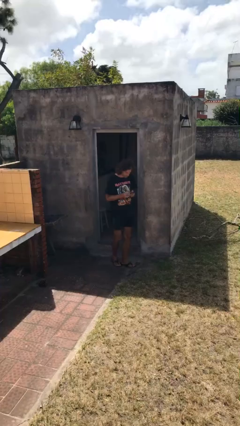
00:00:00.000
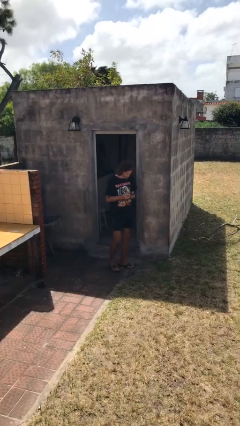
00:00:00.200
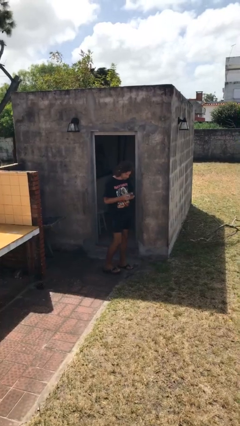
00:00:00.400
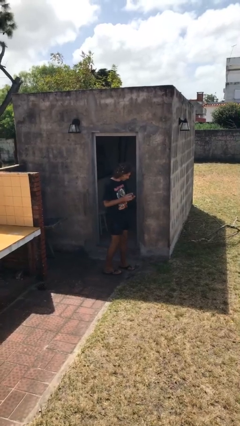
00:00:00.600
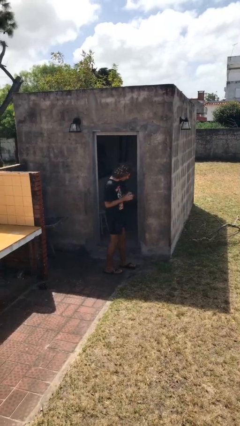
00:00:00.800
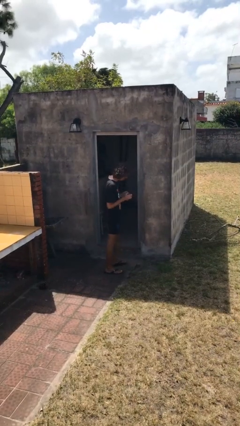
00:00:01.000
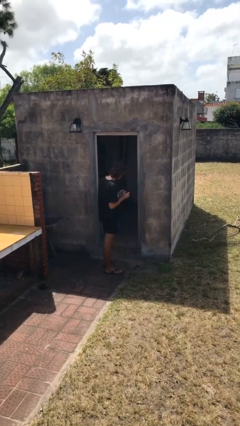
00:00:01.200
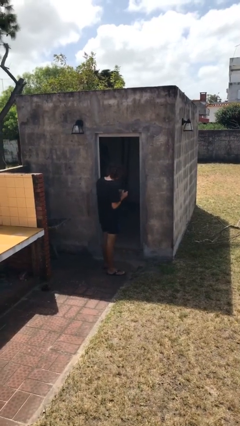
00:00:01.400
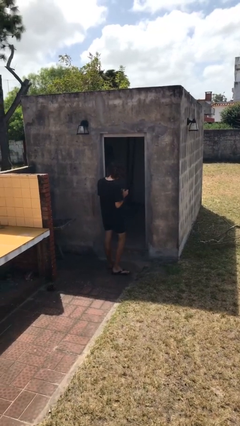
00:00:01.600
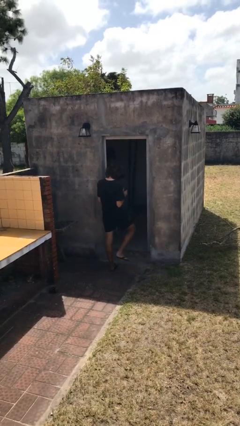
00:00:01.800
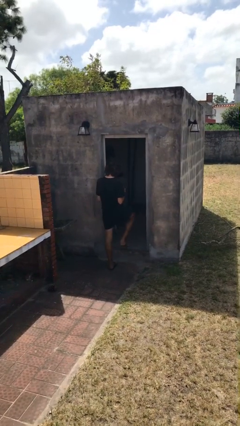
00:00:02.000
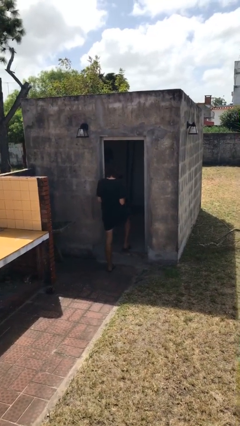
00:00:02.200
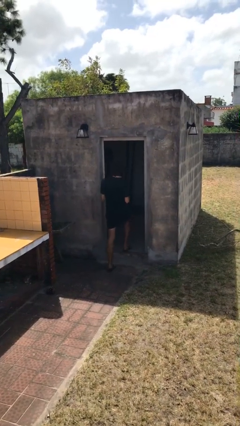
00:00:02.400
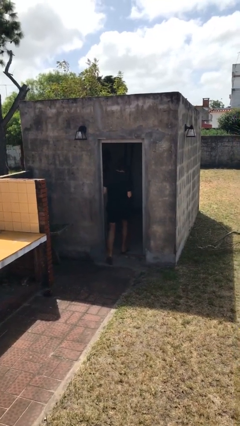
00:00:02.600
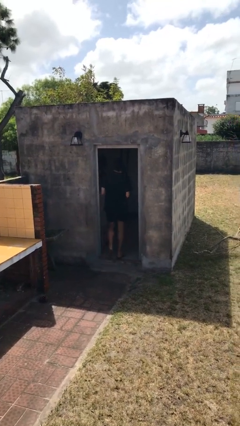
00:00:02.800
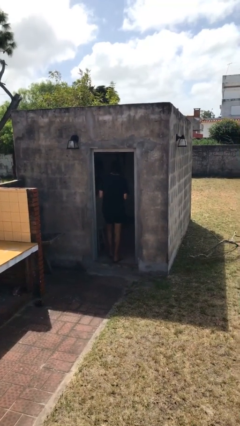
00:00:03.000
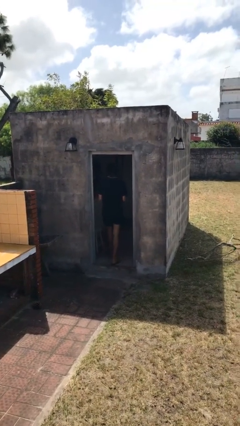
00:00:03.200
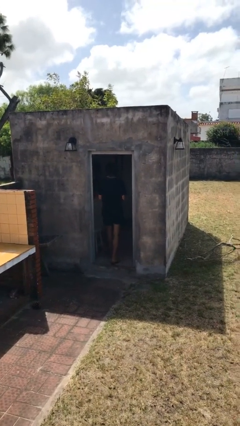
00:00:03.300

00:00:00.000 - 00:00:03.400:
person exits scene through structure

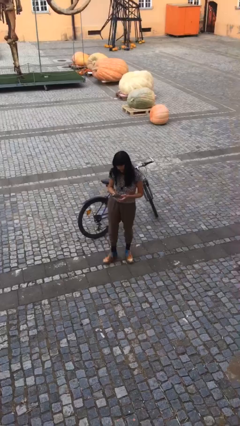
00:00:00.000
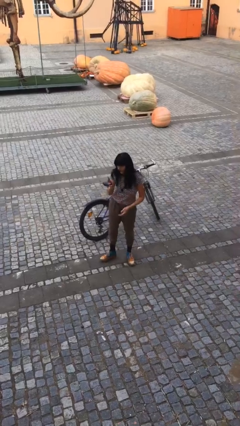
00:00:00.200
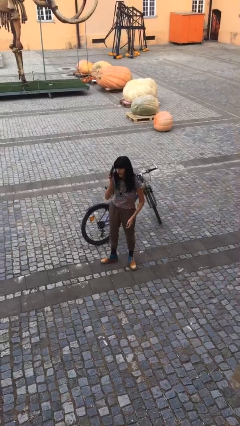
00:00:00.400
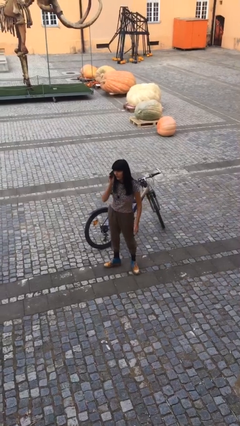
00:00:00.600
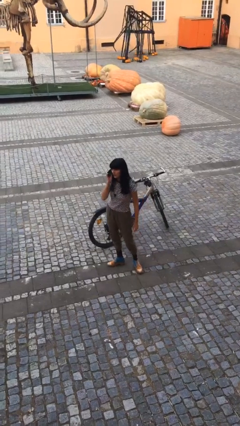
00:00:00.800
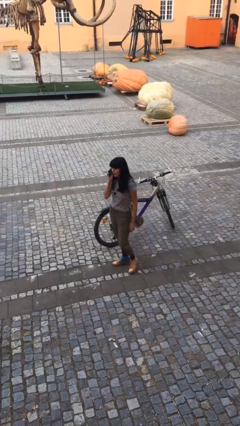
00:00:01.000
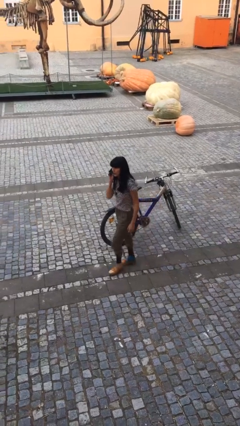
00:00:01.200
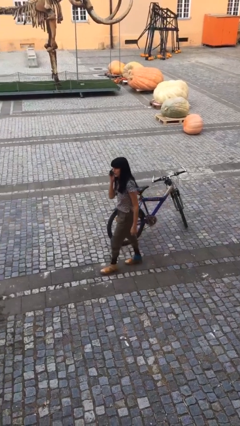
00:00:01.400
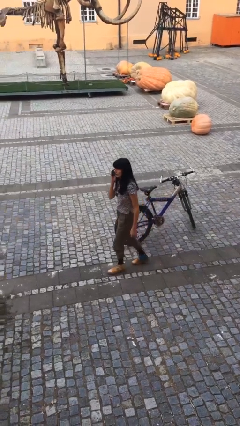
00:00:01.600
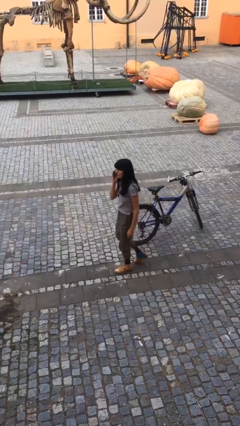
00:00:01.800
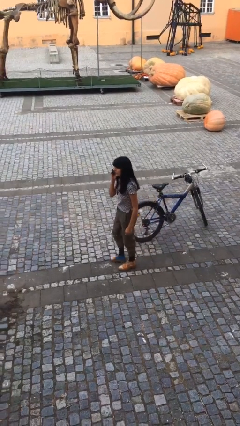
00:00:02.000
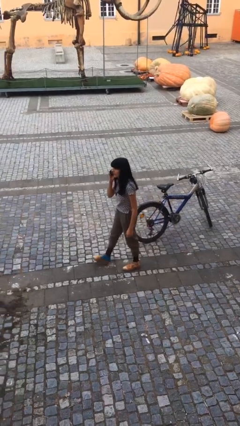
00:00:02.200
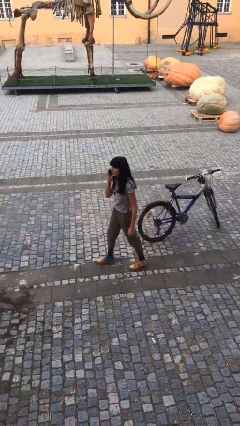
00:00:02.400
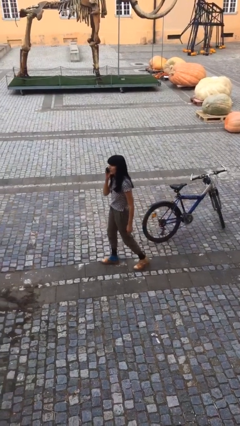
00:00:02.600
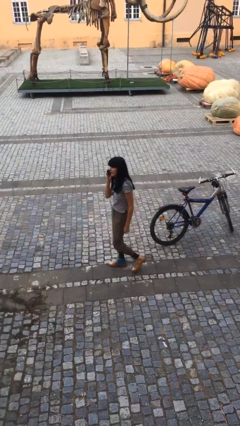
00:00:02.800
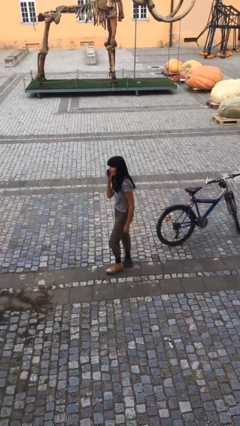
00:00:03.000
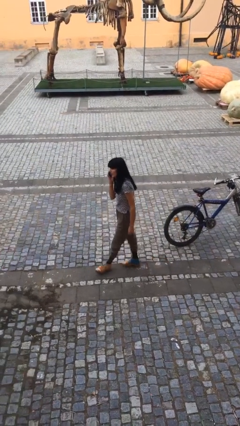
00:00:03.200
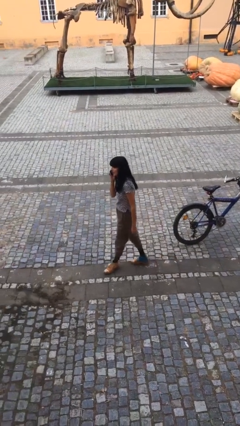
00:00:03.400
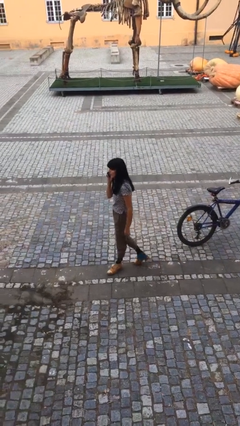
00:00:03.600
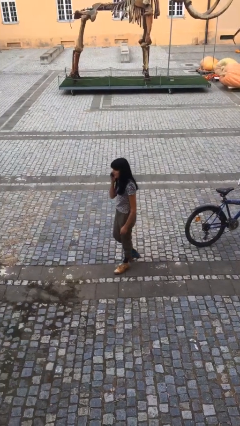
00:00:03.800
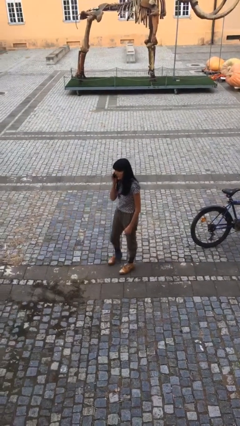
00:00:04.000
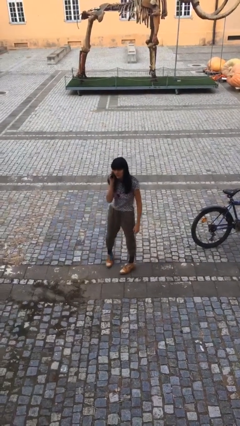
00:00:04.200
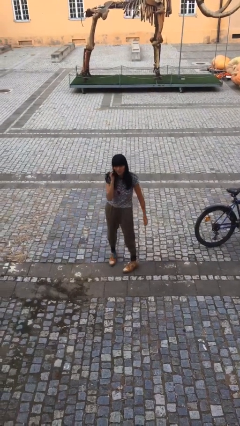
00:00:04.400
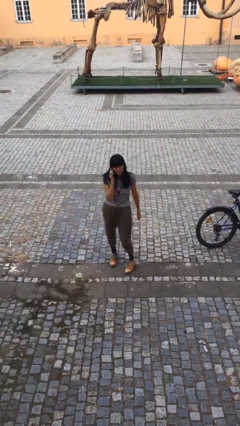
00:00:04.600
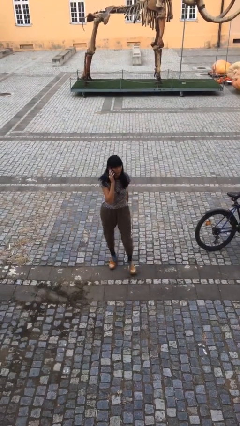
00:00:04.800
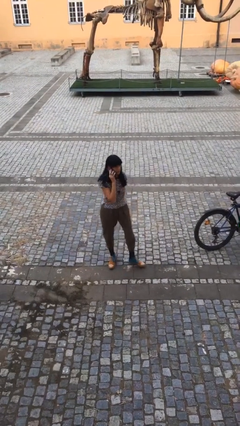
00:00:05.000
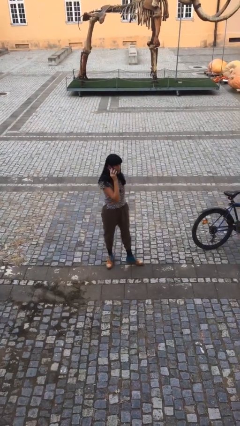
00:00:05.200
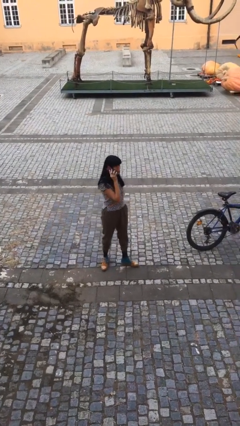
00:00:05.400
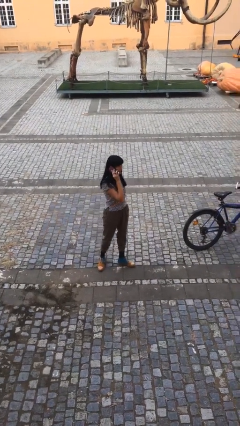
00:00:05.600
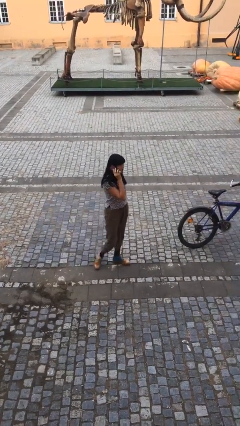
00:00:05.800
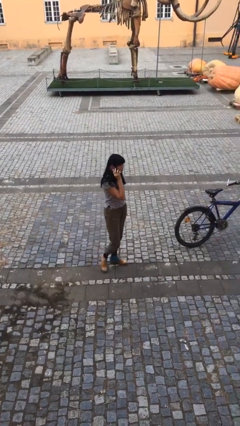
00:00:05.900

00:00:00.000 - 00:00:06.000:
person talks on phone

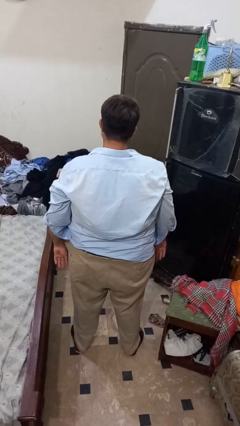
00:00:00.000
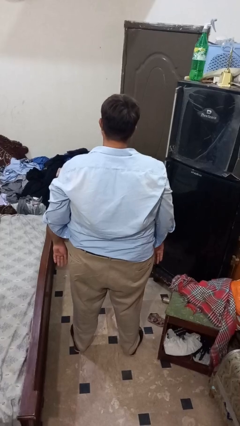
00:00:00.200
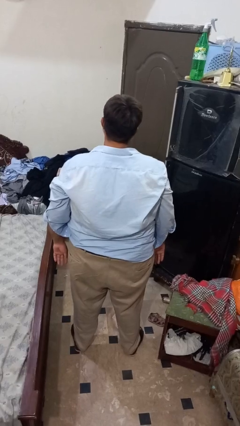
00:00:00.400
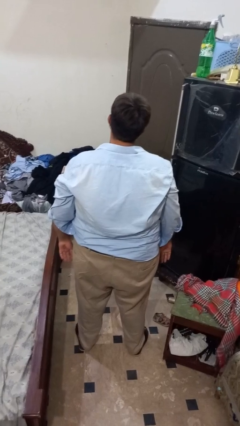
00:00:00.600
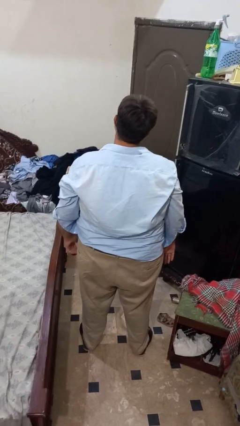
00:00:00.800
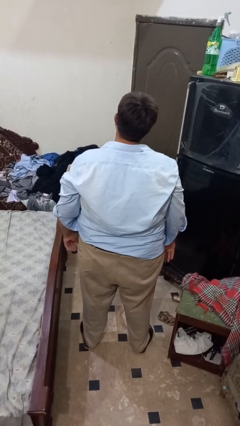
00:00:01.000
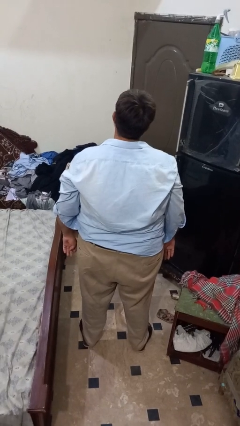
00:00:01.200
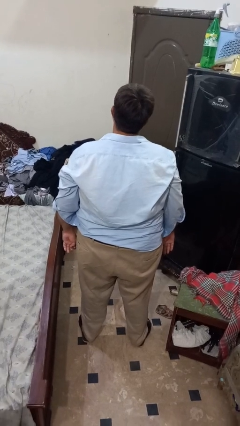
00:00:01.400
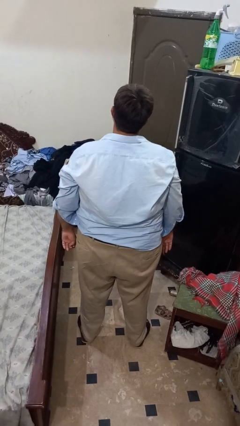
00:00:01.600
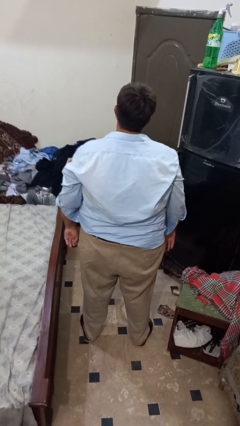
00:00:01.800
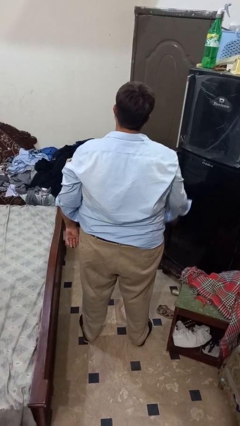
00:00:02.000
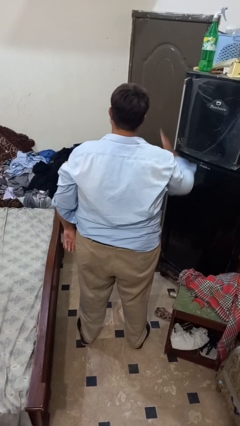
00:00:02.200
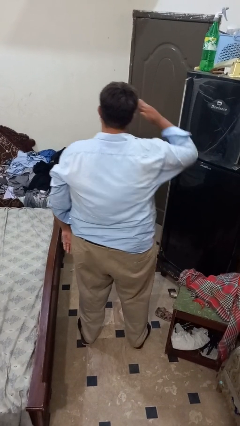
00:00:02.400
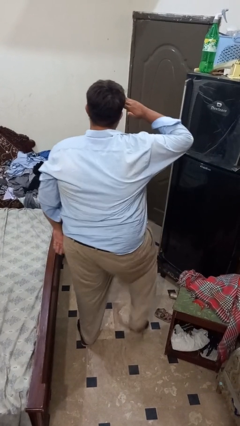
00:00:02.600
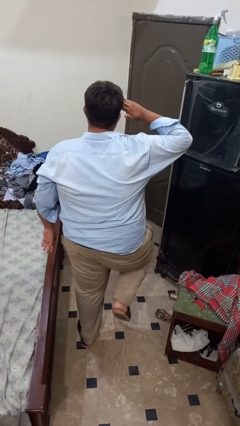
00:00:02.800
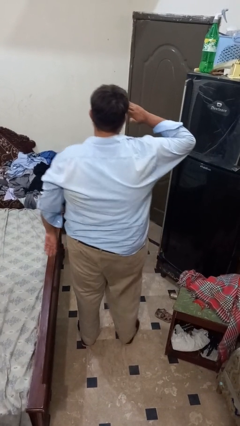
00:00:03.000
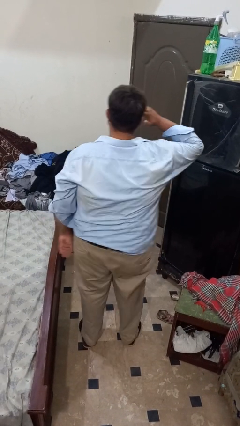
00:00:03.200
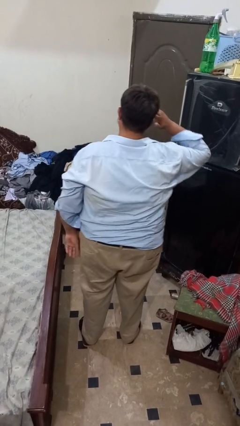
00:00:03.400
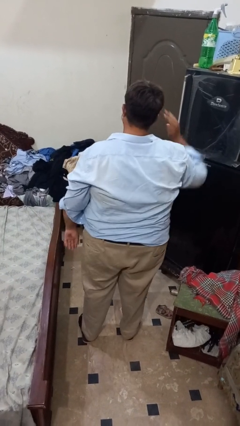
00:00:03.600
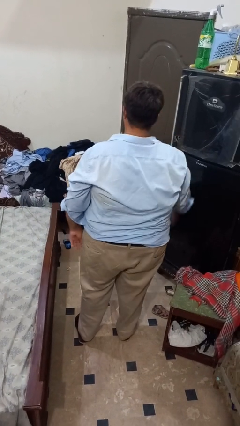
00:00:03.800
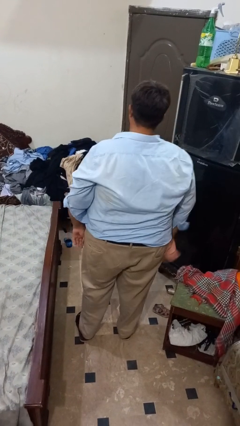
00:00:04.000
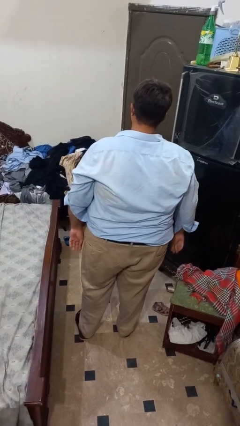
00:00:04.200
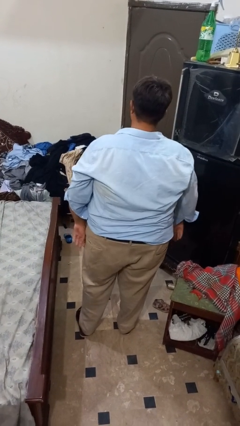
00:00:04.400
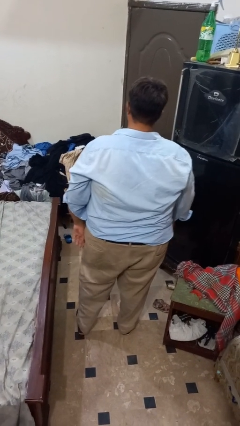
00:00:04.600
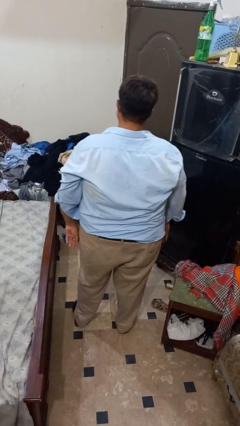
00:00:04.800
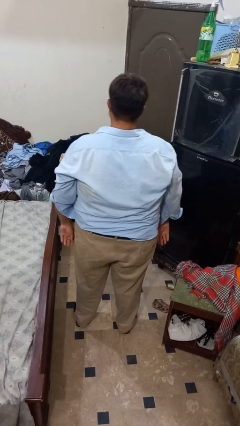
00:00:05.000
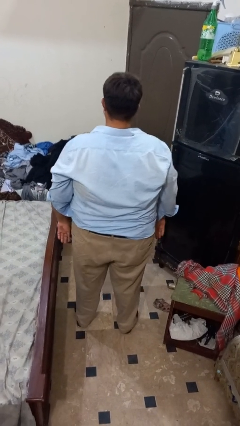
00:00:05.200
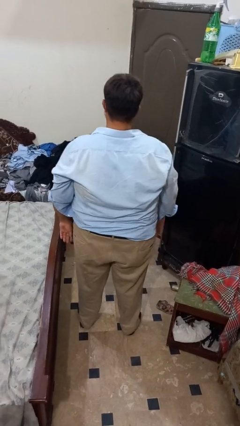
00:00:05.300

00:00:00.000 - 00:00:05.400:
person salutes

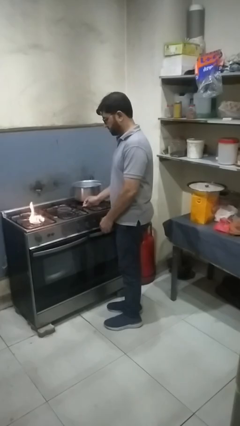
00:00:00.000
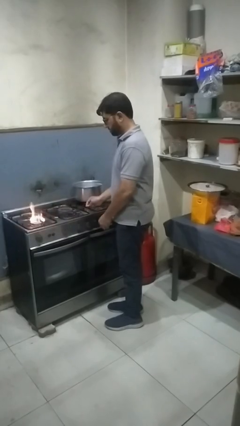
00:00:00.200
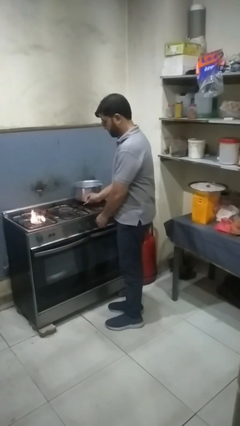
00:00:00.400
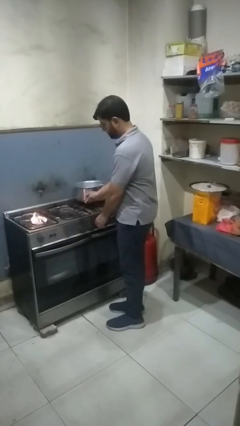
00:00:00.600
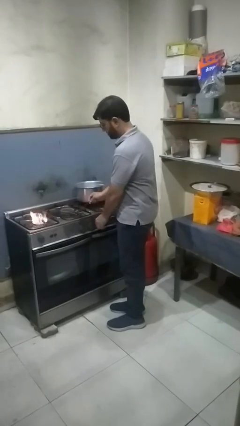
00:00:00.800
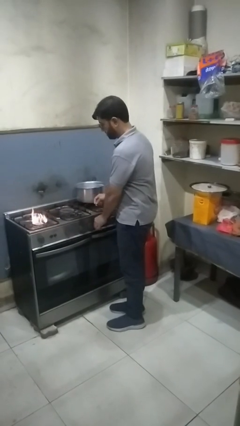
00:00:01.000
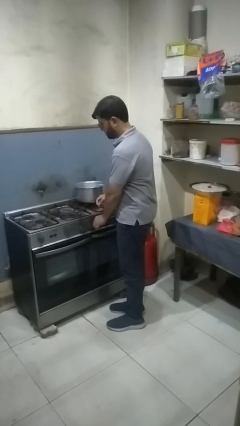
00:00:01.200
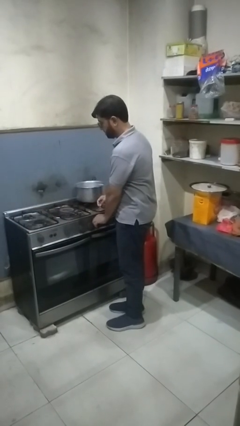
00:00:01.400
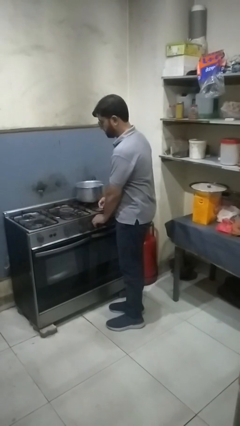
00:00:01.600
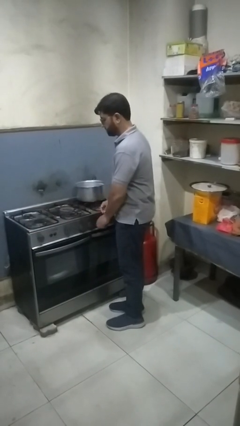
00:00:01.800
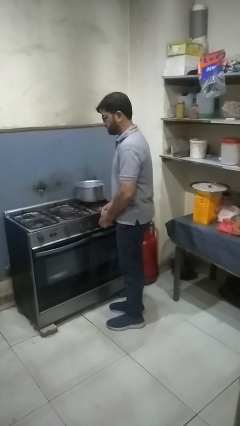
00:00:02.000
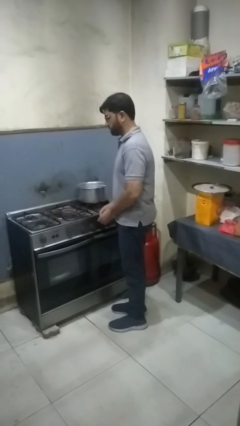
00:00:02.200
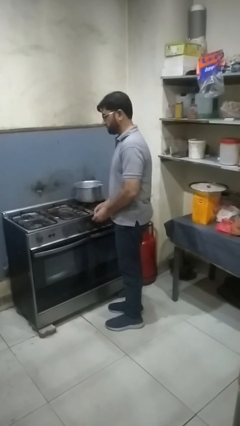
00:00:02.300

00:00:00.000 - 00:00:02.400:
person turns off stovetop

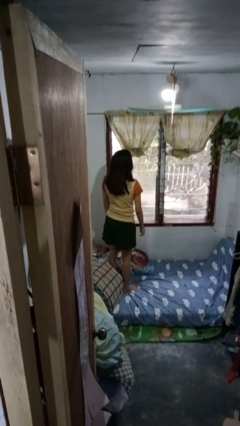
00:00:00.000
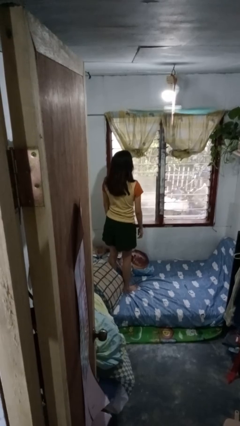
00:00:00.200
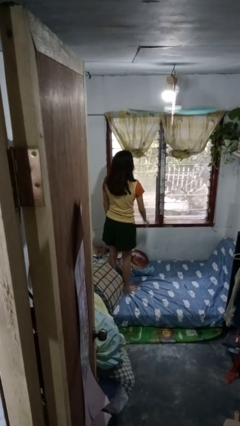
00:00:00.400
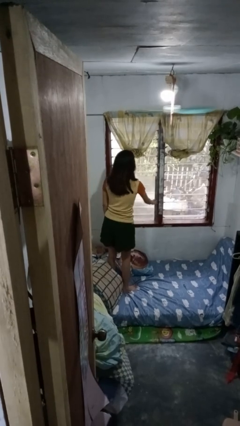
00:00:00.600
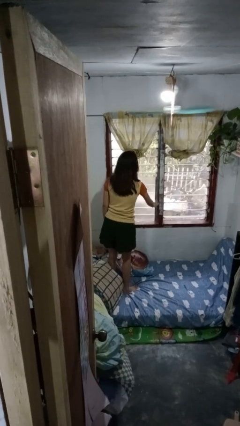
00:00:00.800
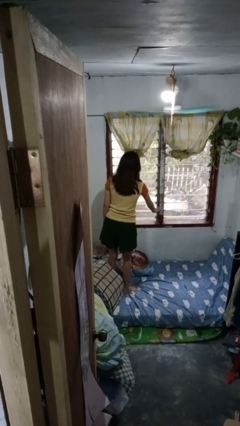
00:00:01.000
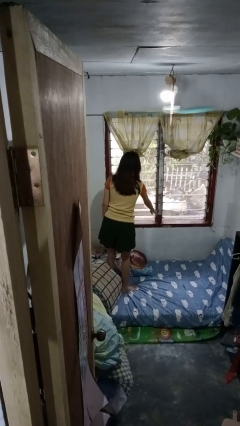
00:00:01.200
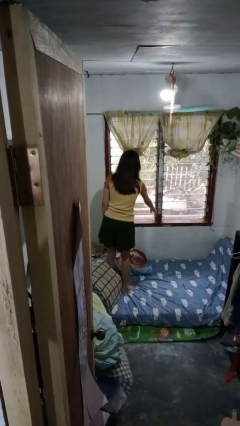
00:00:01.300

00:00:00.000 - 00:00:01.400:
person opens home window
